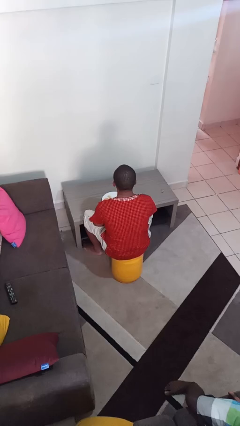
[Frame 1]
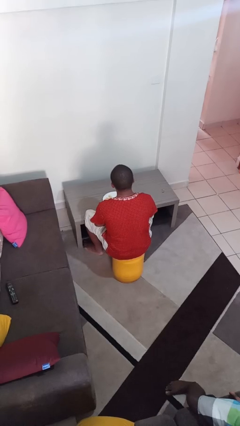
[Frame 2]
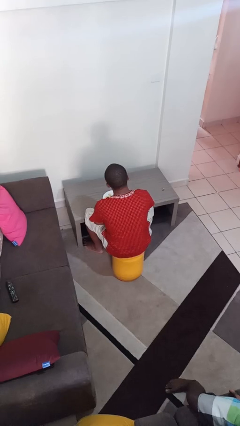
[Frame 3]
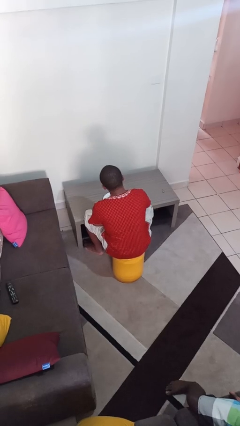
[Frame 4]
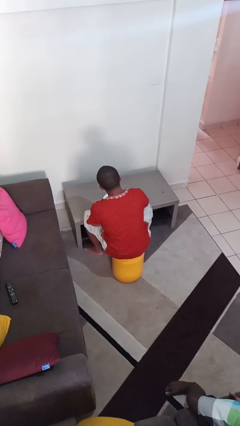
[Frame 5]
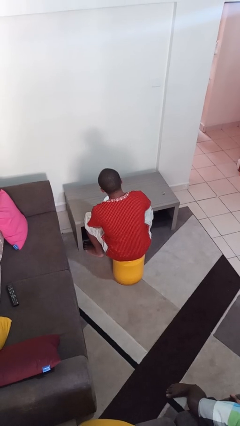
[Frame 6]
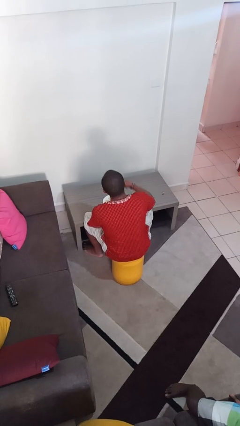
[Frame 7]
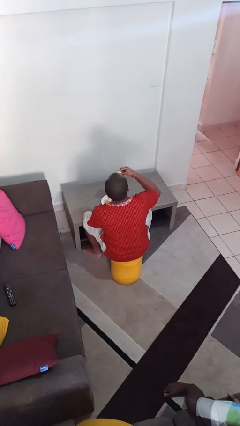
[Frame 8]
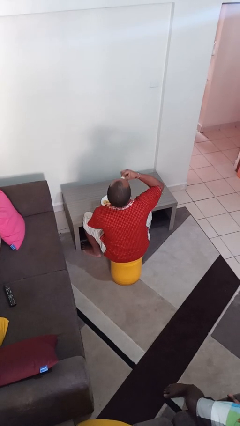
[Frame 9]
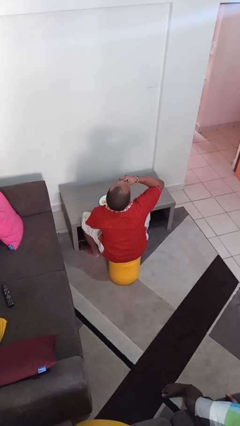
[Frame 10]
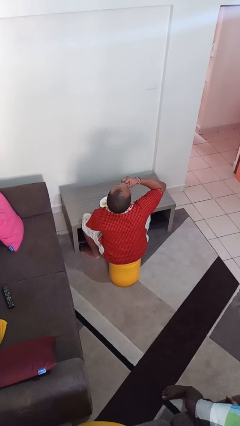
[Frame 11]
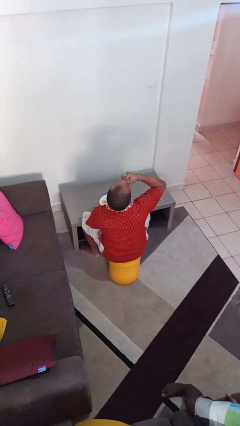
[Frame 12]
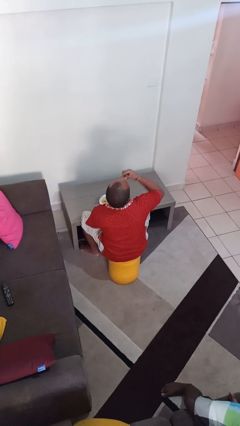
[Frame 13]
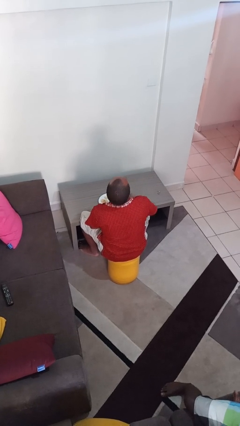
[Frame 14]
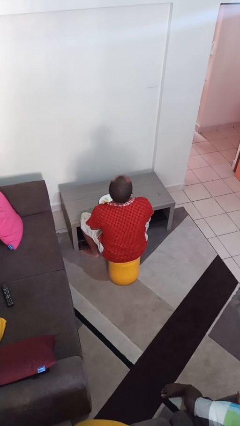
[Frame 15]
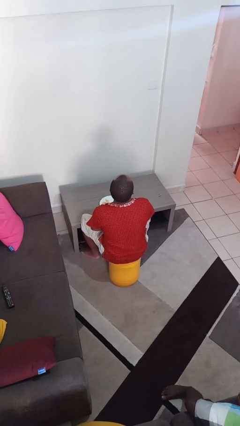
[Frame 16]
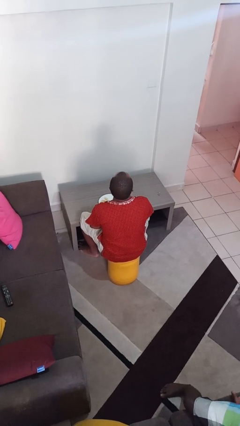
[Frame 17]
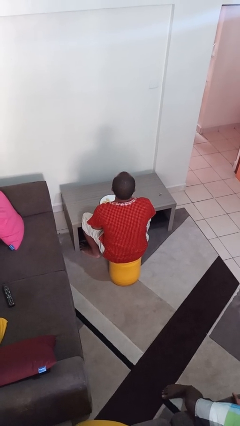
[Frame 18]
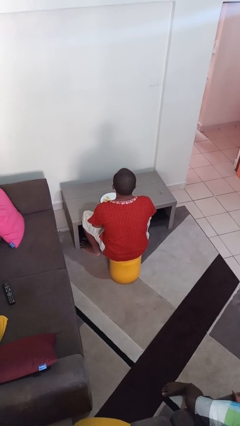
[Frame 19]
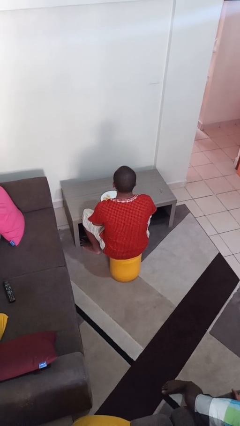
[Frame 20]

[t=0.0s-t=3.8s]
person eats with hands

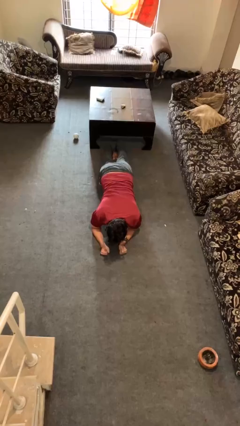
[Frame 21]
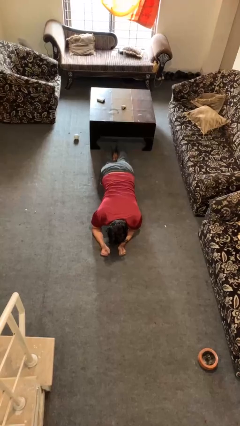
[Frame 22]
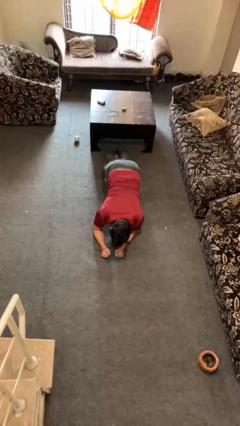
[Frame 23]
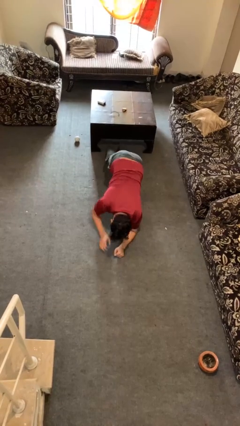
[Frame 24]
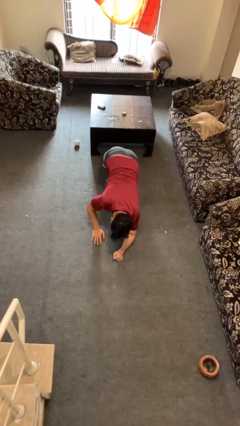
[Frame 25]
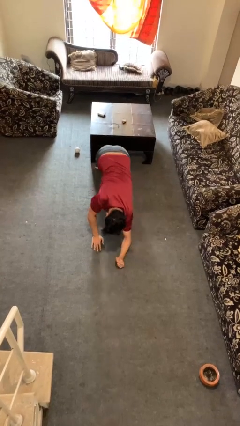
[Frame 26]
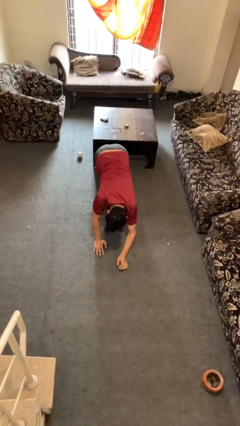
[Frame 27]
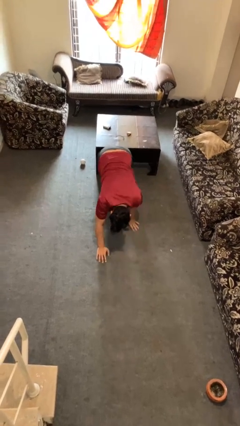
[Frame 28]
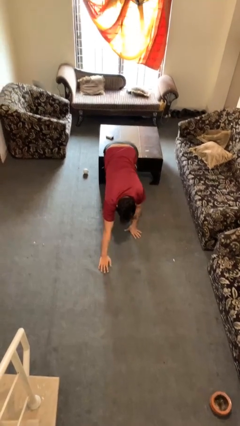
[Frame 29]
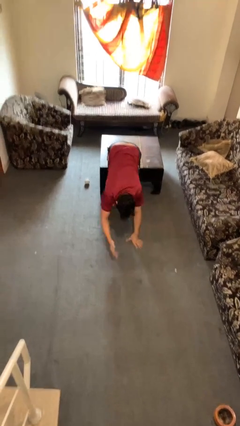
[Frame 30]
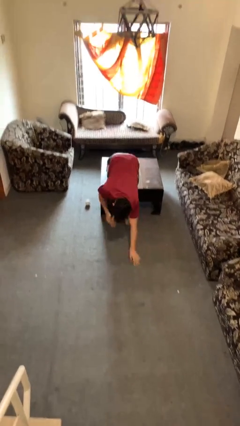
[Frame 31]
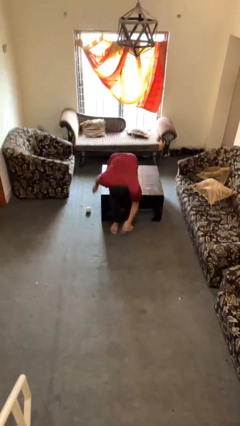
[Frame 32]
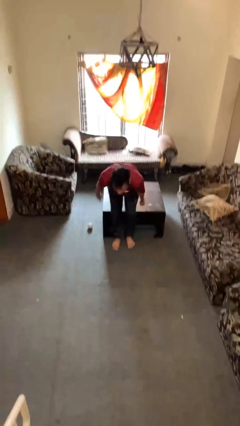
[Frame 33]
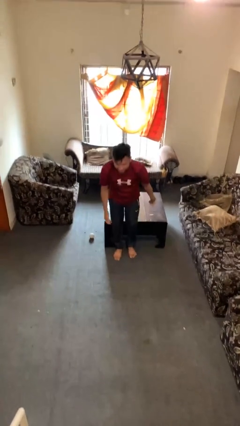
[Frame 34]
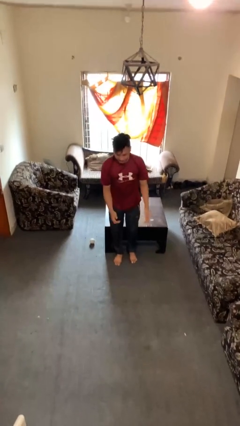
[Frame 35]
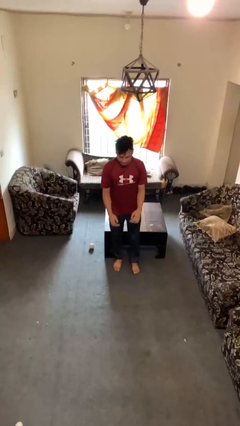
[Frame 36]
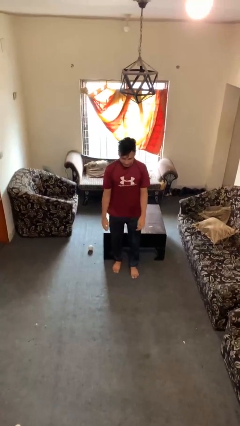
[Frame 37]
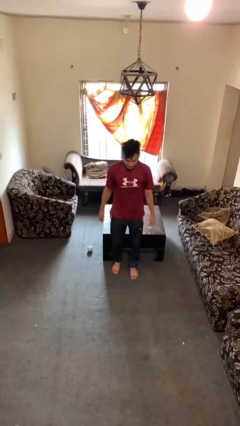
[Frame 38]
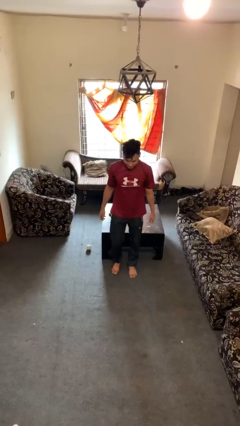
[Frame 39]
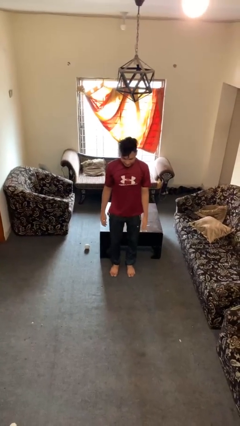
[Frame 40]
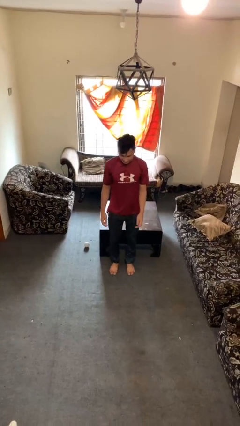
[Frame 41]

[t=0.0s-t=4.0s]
person stands up from floor

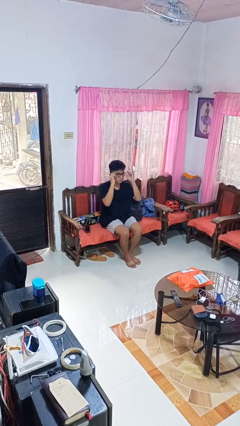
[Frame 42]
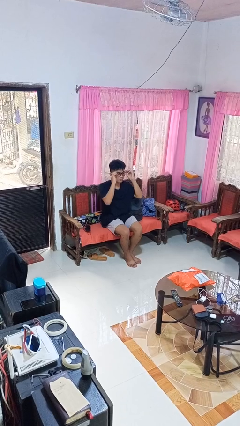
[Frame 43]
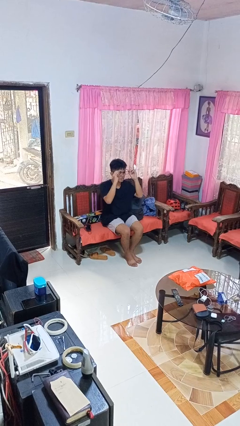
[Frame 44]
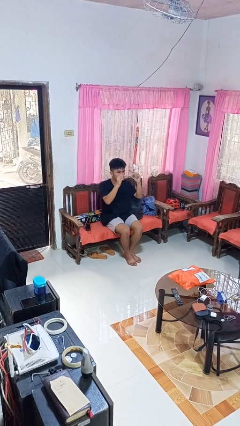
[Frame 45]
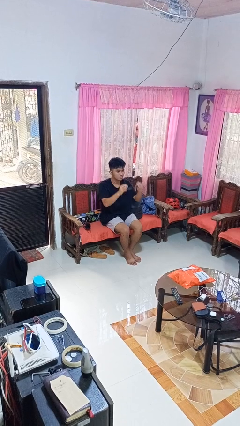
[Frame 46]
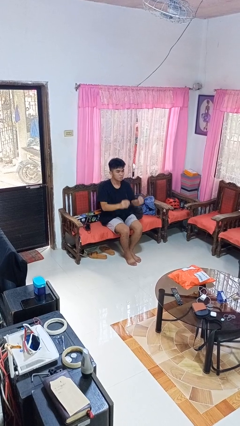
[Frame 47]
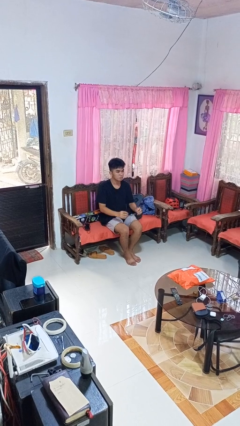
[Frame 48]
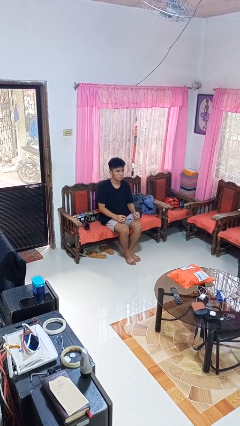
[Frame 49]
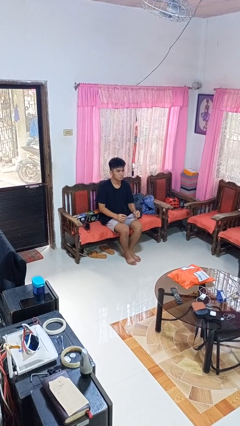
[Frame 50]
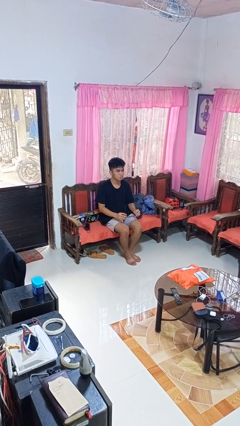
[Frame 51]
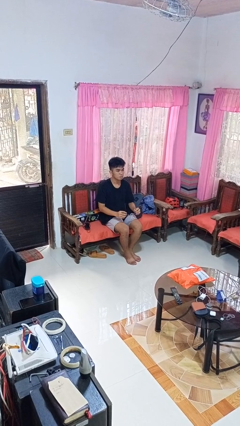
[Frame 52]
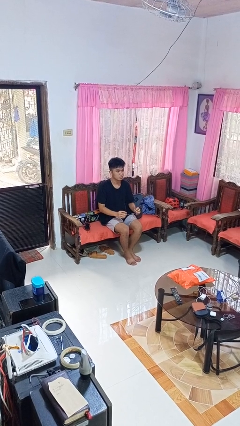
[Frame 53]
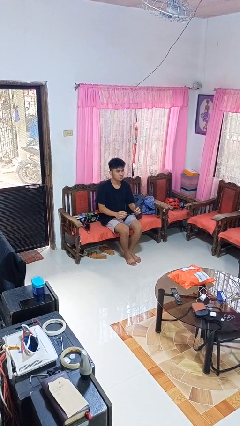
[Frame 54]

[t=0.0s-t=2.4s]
person takes off glasses

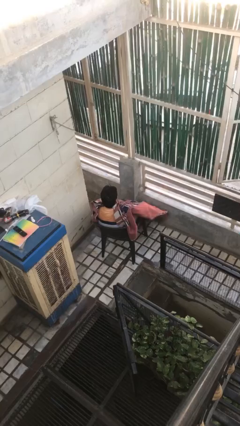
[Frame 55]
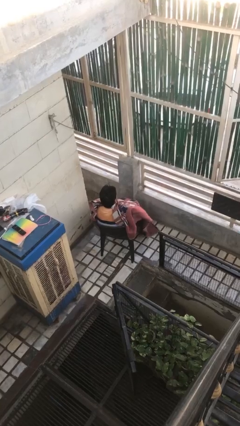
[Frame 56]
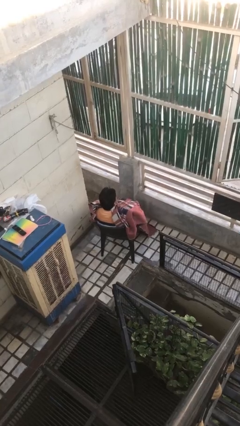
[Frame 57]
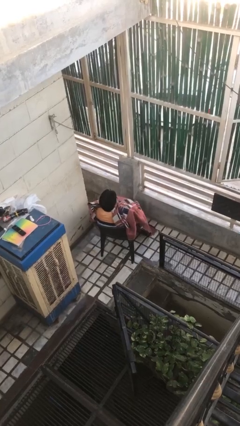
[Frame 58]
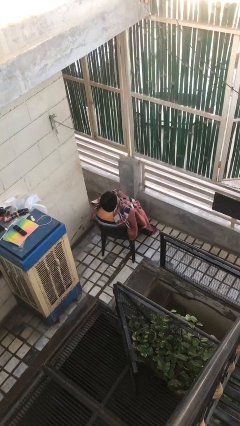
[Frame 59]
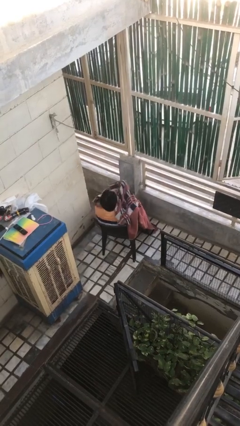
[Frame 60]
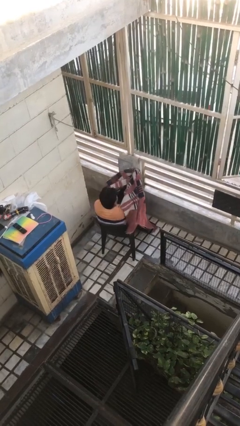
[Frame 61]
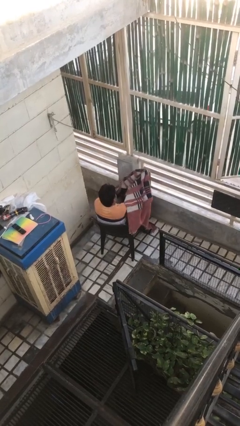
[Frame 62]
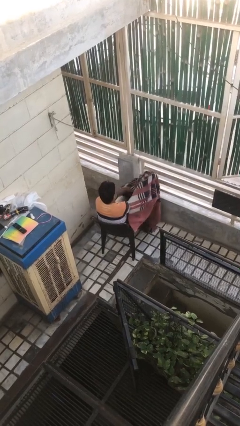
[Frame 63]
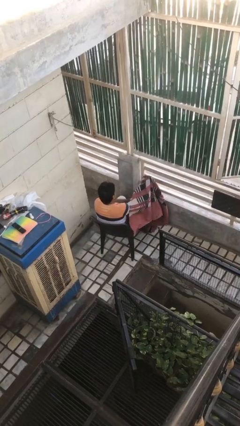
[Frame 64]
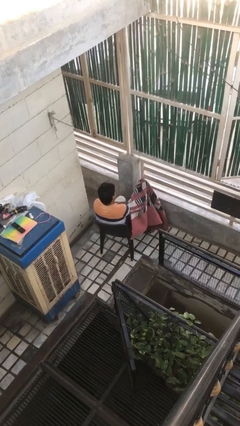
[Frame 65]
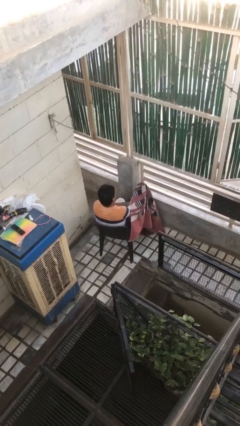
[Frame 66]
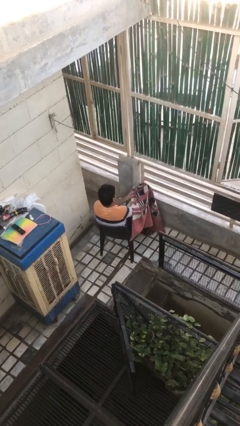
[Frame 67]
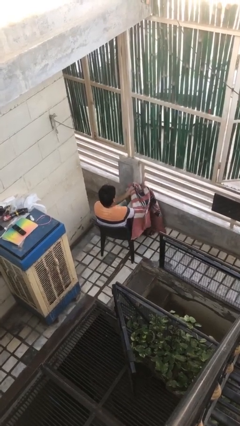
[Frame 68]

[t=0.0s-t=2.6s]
person uncovers with blanket

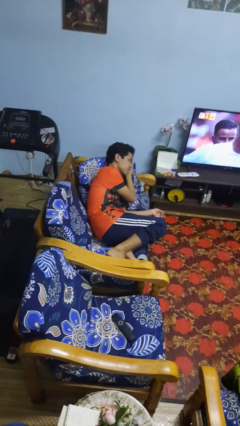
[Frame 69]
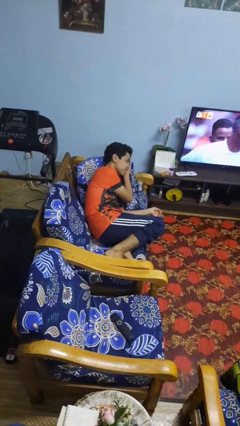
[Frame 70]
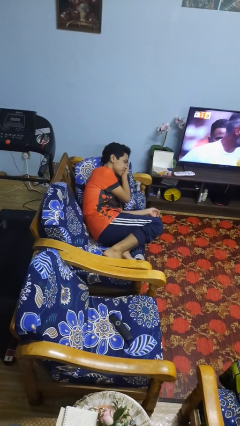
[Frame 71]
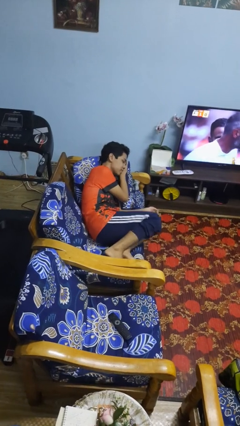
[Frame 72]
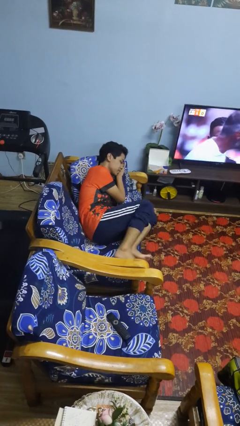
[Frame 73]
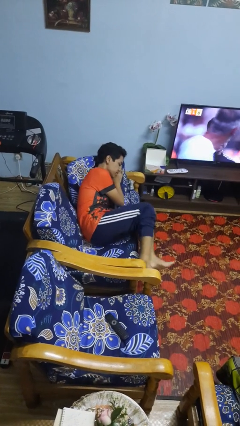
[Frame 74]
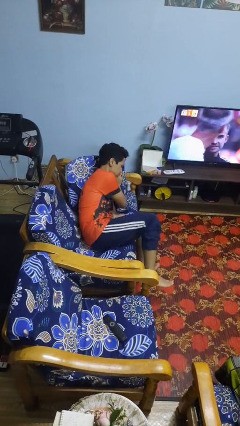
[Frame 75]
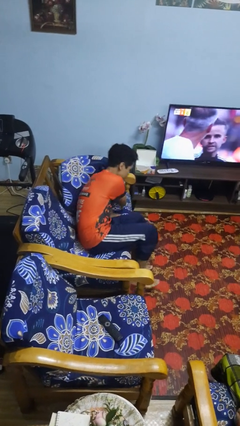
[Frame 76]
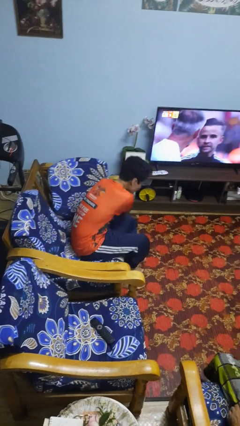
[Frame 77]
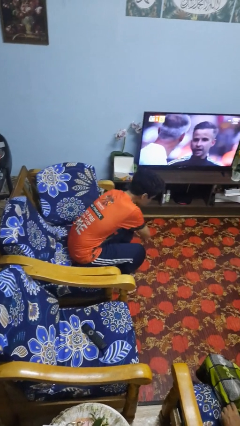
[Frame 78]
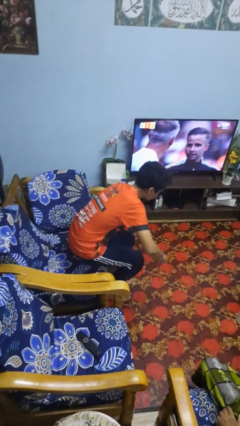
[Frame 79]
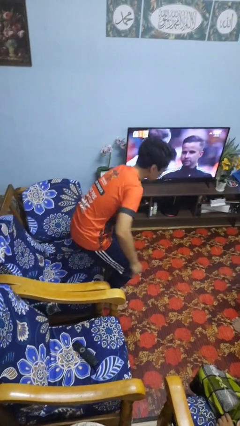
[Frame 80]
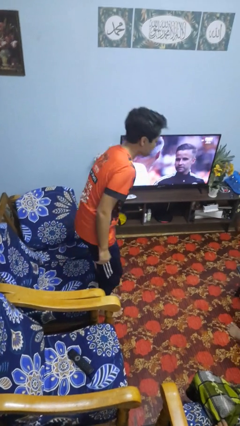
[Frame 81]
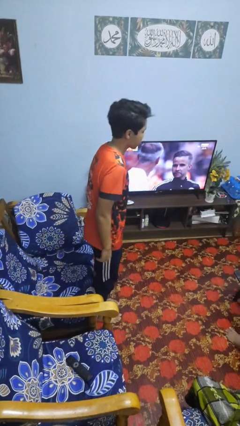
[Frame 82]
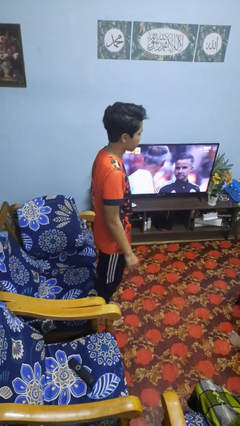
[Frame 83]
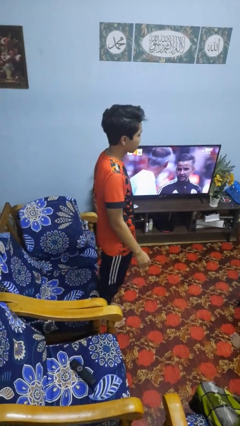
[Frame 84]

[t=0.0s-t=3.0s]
person stands up

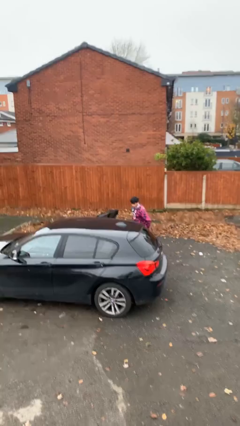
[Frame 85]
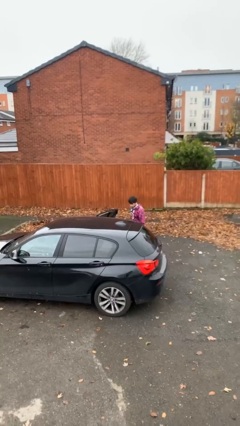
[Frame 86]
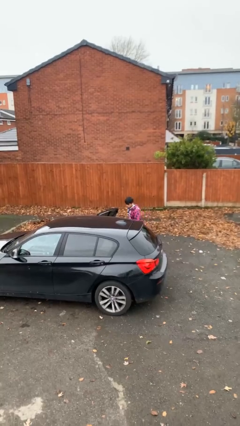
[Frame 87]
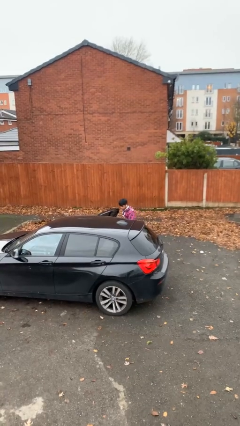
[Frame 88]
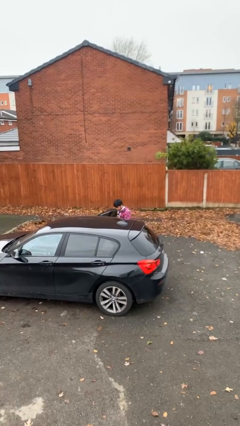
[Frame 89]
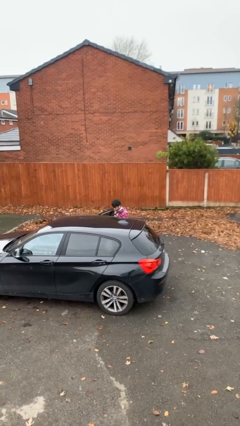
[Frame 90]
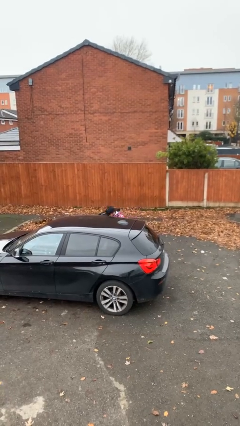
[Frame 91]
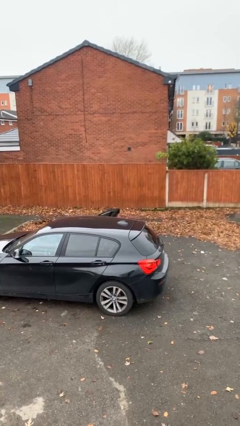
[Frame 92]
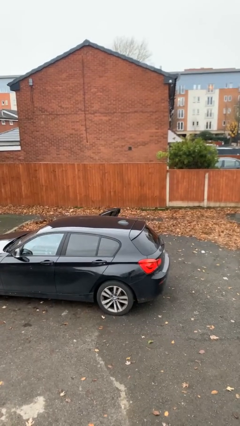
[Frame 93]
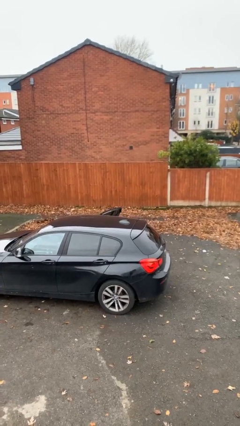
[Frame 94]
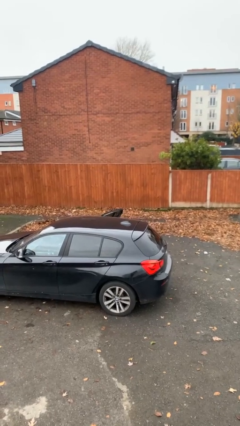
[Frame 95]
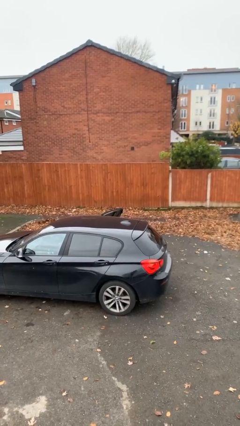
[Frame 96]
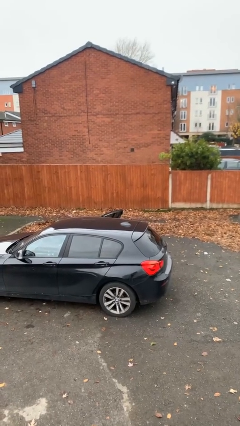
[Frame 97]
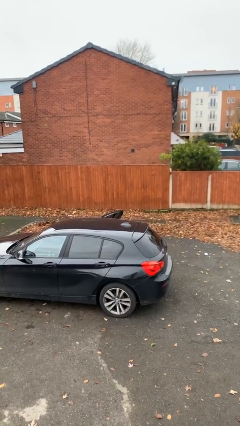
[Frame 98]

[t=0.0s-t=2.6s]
person enters car
